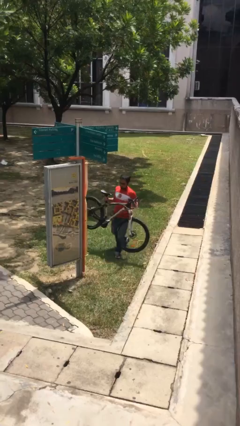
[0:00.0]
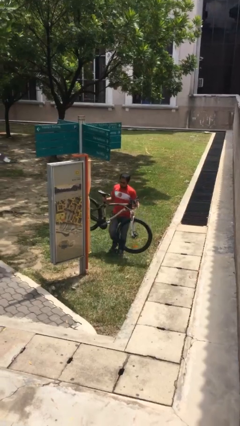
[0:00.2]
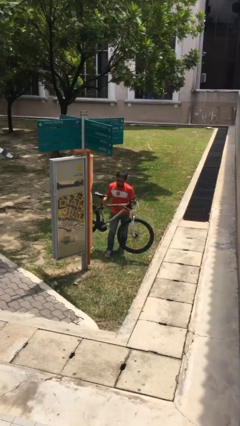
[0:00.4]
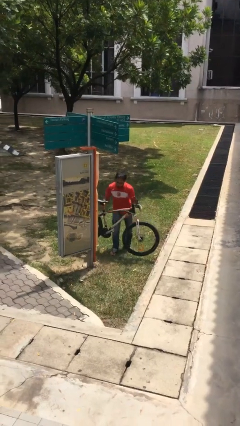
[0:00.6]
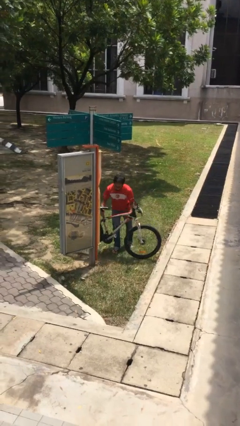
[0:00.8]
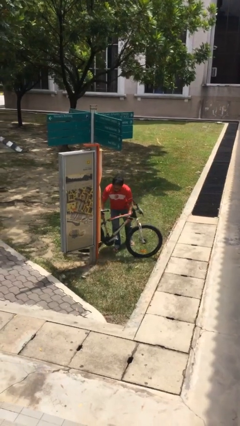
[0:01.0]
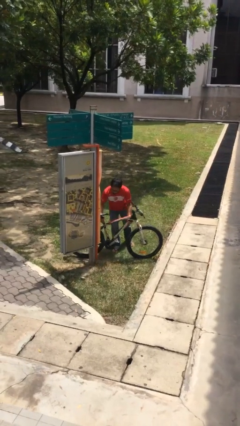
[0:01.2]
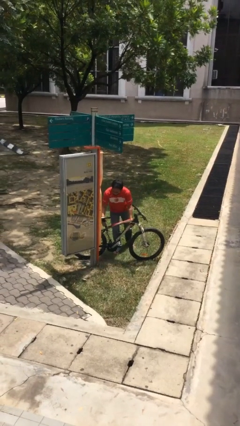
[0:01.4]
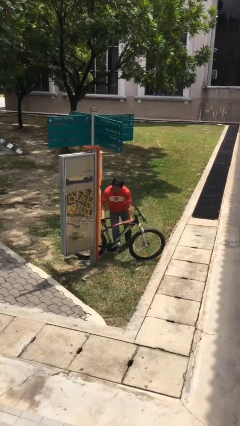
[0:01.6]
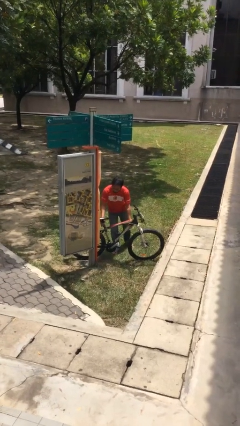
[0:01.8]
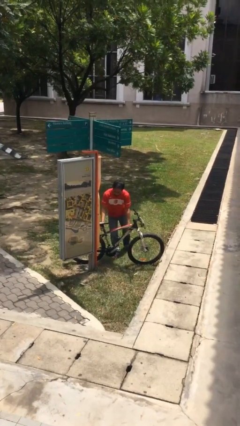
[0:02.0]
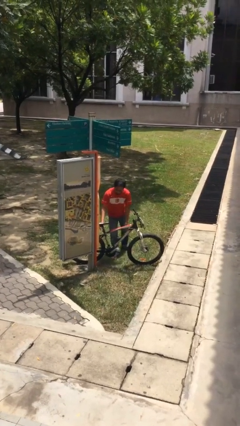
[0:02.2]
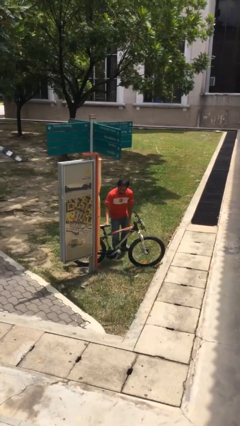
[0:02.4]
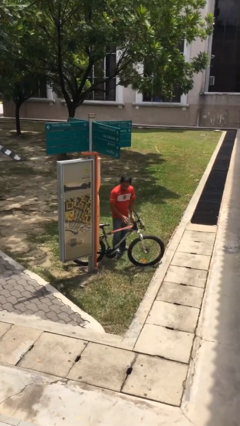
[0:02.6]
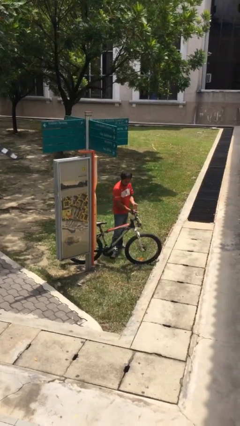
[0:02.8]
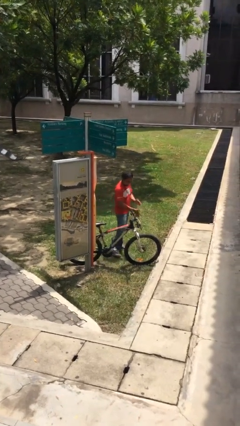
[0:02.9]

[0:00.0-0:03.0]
person puts down object on floor

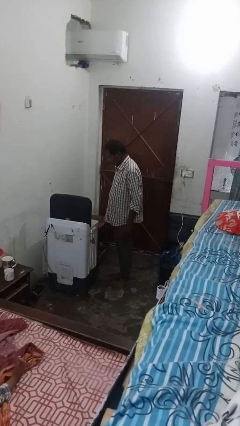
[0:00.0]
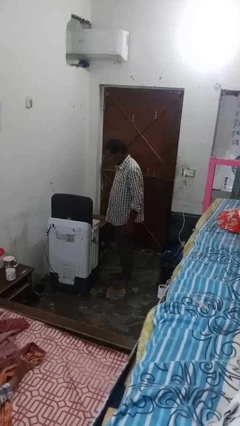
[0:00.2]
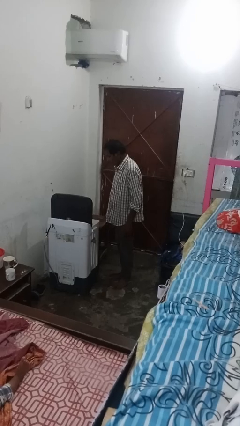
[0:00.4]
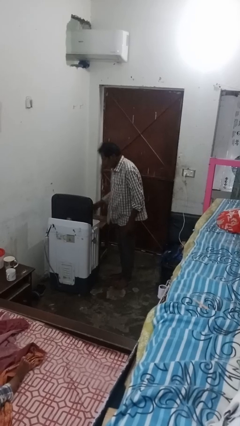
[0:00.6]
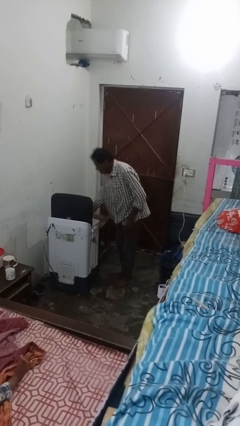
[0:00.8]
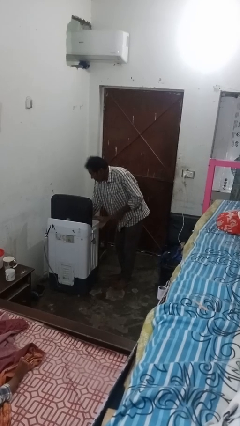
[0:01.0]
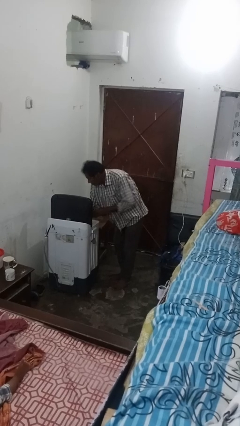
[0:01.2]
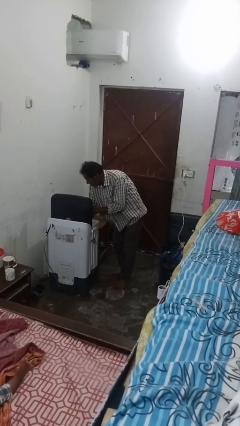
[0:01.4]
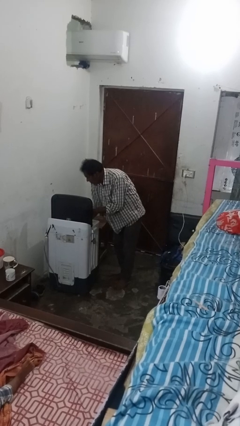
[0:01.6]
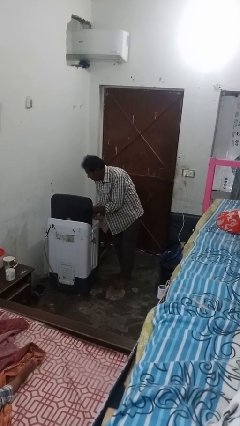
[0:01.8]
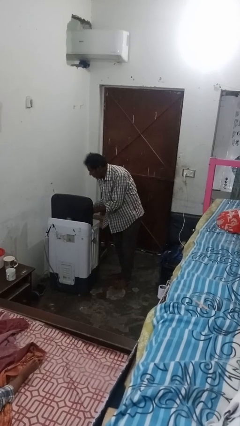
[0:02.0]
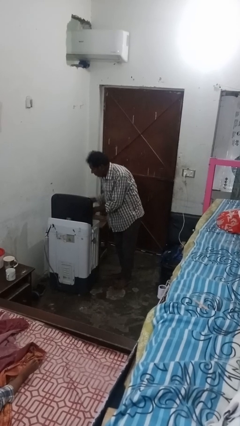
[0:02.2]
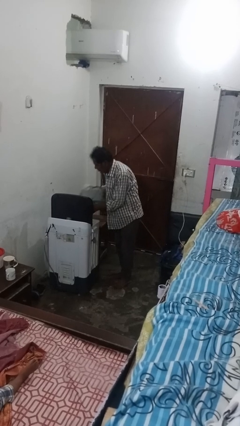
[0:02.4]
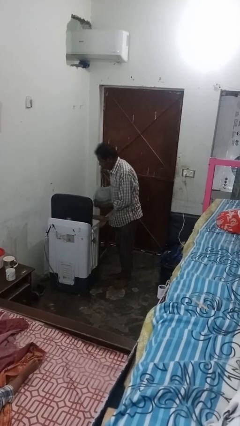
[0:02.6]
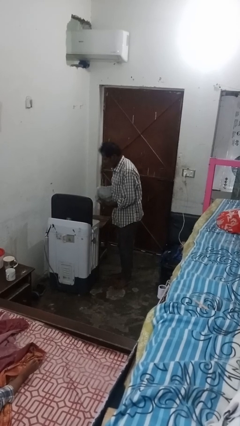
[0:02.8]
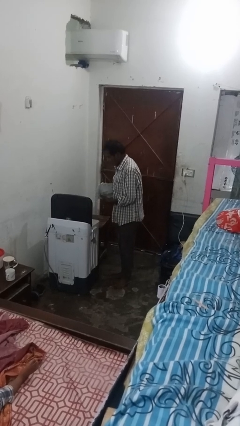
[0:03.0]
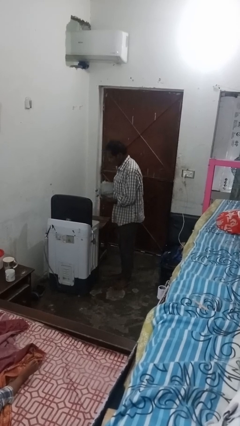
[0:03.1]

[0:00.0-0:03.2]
person unloads dryer

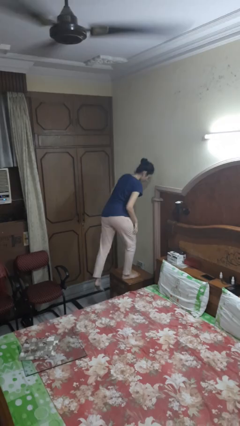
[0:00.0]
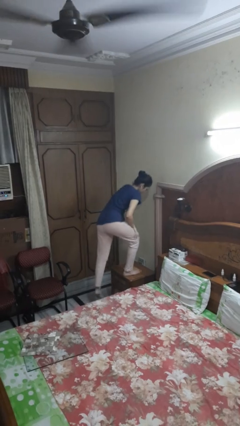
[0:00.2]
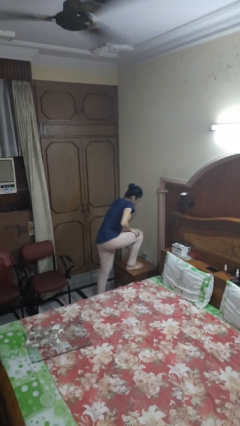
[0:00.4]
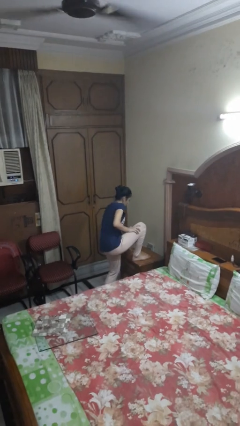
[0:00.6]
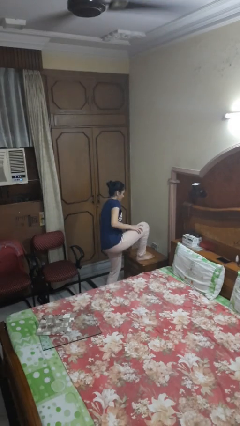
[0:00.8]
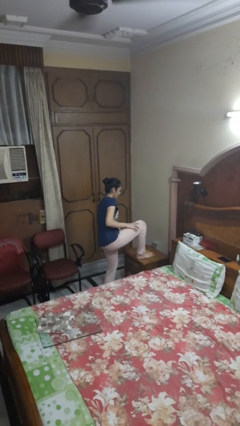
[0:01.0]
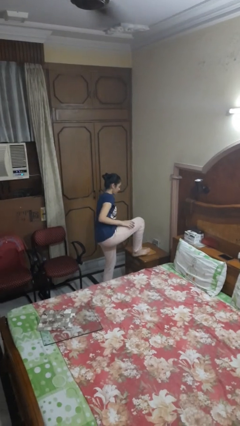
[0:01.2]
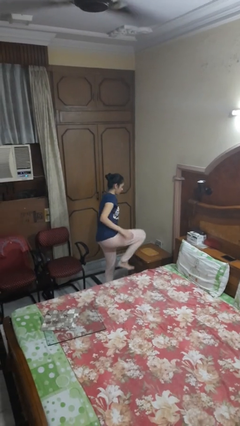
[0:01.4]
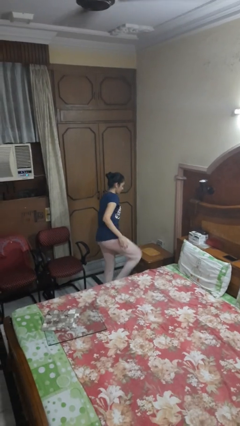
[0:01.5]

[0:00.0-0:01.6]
person climbs off table

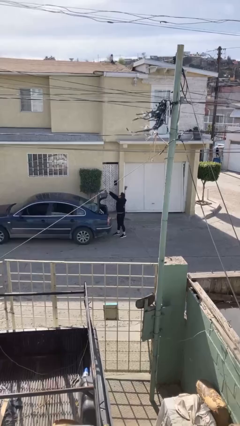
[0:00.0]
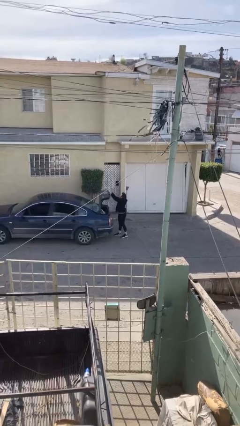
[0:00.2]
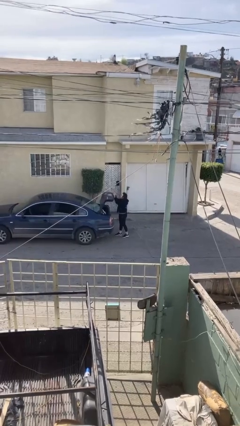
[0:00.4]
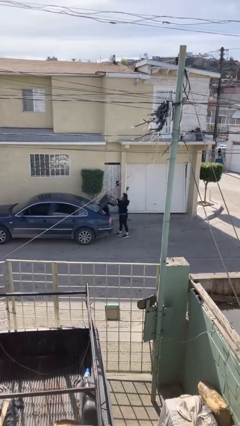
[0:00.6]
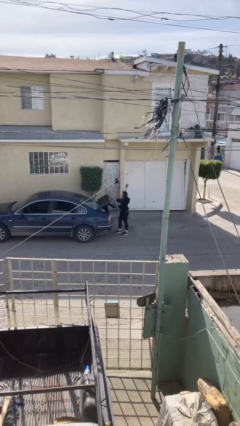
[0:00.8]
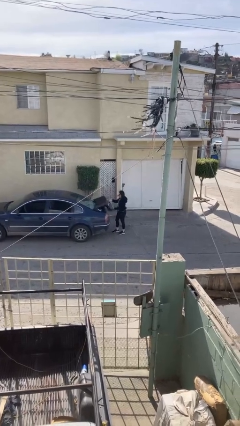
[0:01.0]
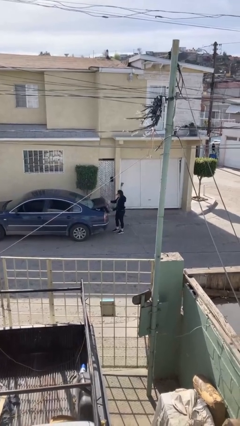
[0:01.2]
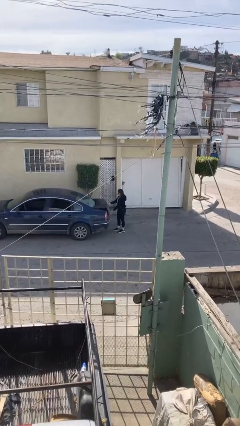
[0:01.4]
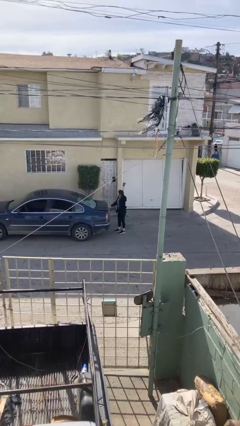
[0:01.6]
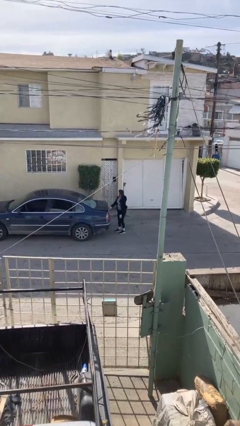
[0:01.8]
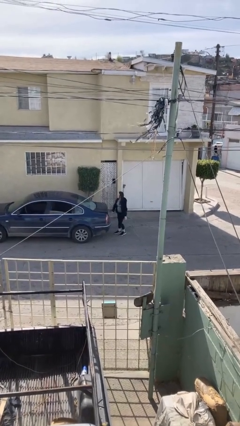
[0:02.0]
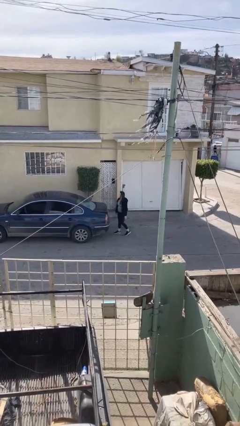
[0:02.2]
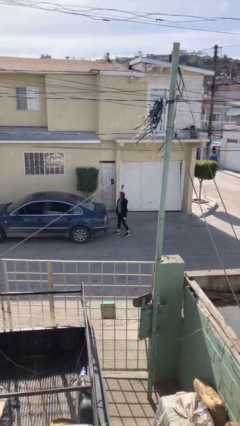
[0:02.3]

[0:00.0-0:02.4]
person closes car trunk

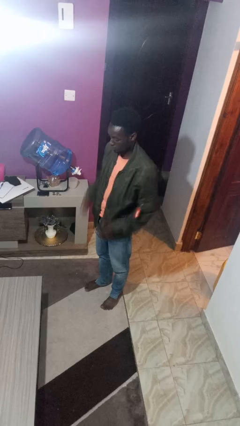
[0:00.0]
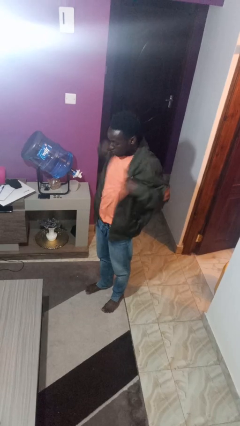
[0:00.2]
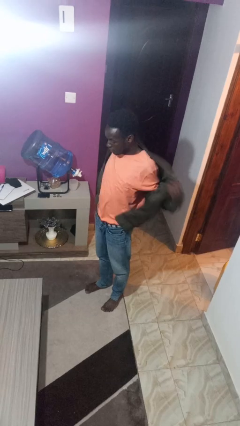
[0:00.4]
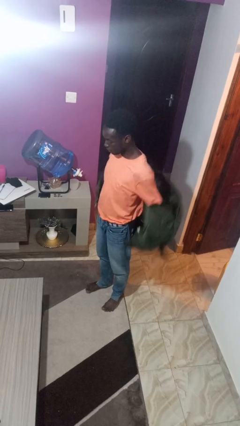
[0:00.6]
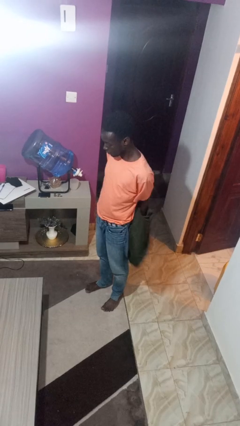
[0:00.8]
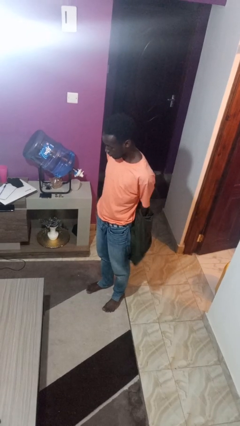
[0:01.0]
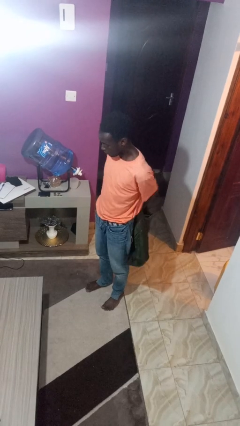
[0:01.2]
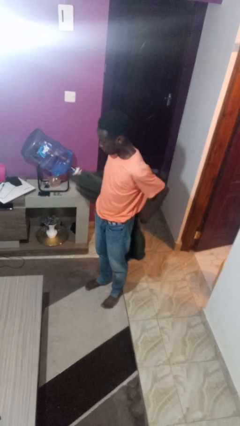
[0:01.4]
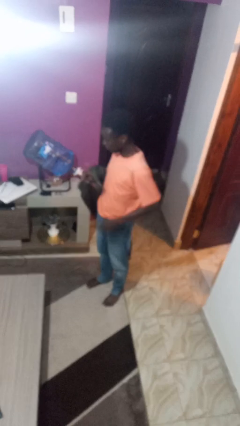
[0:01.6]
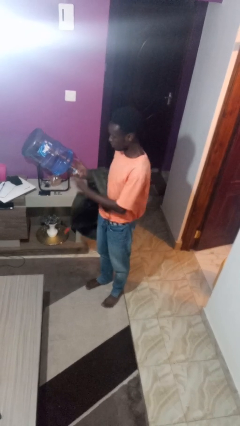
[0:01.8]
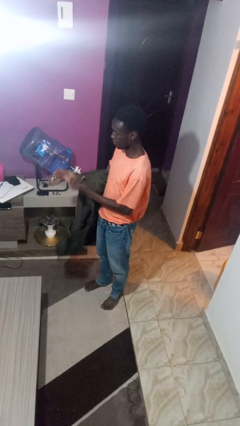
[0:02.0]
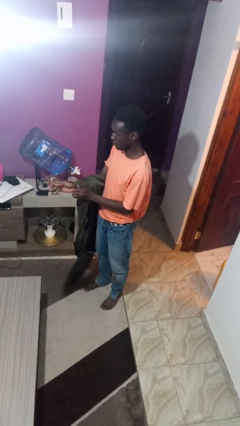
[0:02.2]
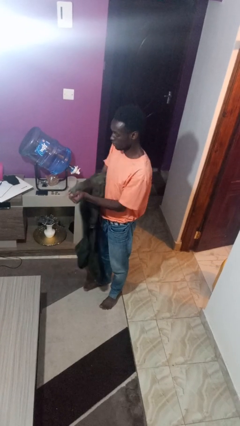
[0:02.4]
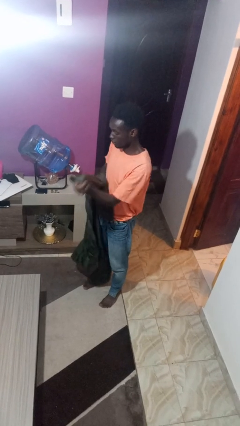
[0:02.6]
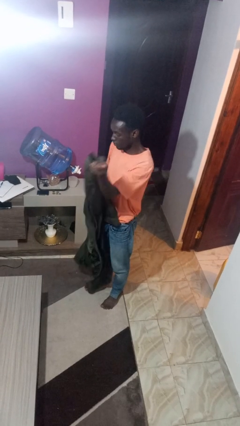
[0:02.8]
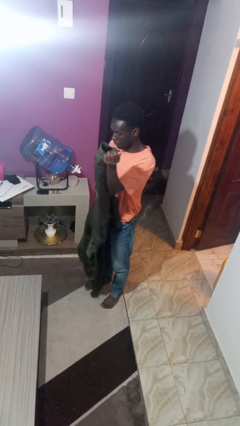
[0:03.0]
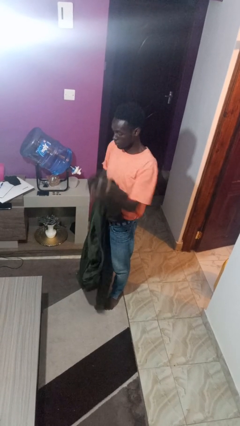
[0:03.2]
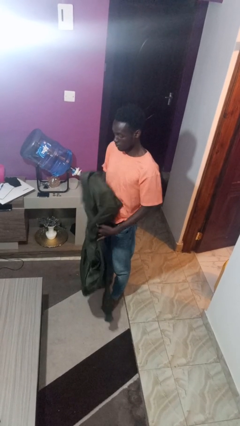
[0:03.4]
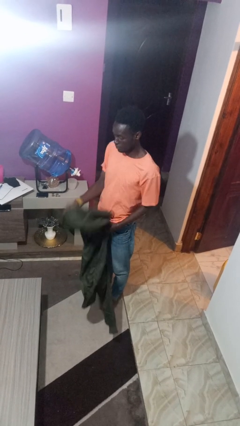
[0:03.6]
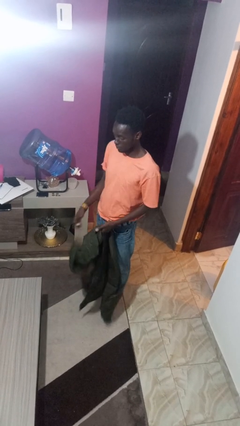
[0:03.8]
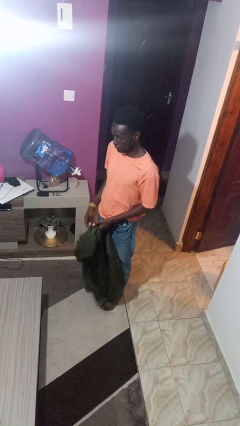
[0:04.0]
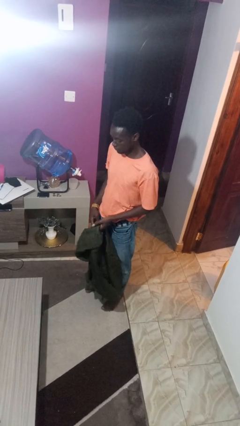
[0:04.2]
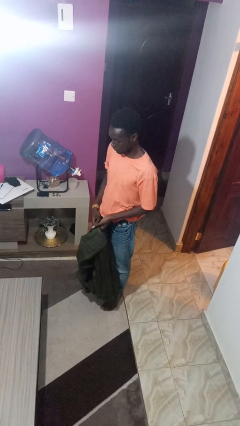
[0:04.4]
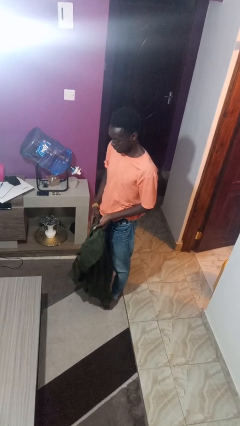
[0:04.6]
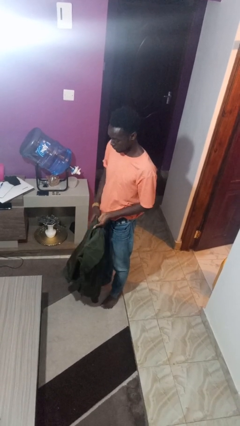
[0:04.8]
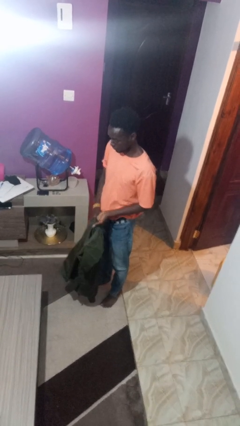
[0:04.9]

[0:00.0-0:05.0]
person takes off jacket

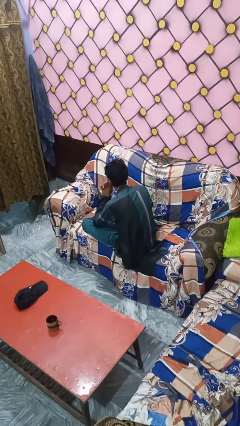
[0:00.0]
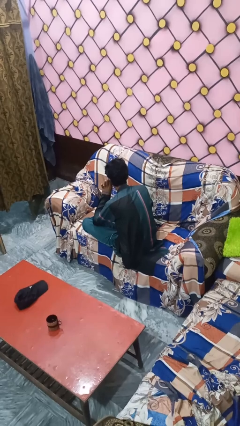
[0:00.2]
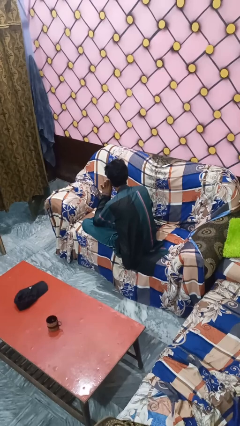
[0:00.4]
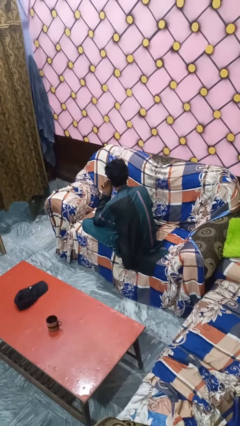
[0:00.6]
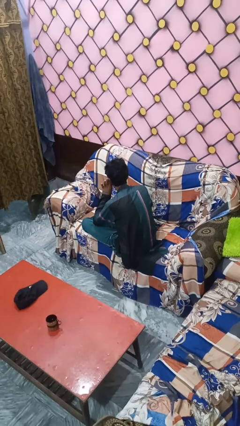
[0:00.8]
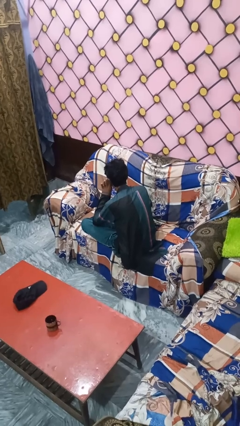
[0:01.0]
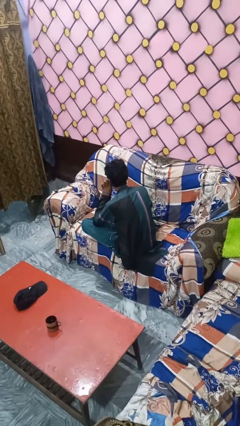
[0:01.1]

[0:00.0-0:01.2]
person gestures listen closely

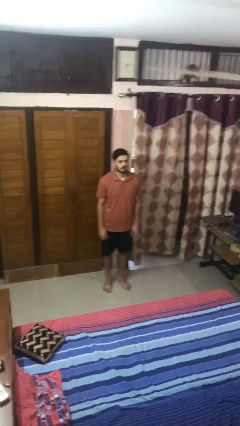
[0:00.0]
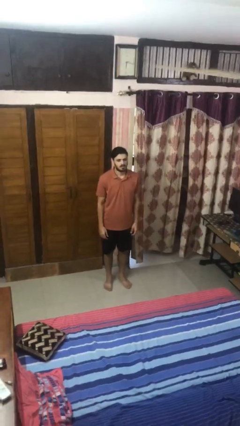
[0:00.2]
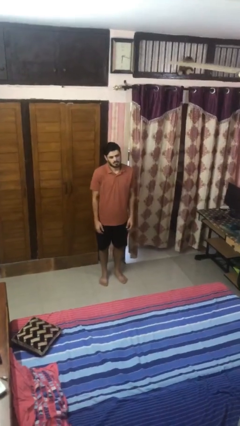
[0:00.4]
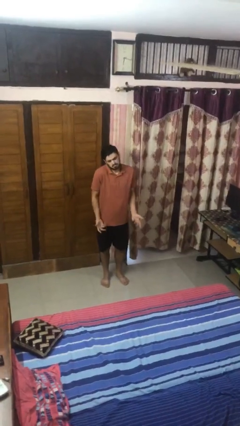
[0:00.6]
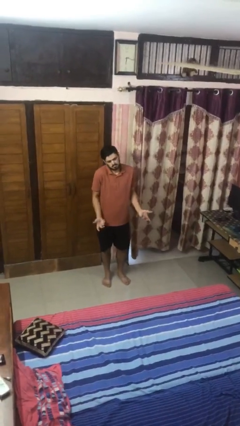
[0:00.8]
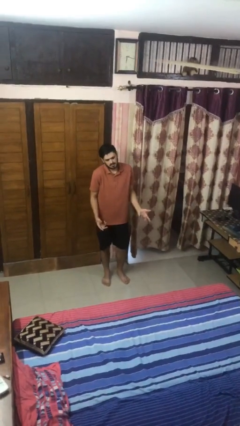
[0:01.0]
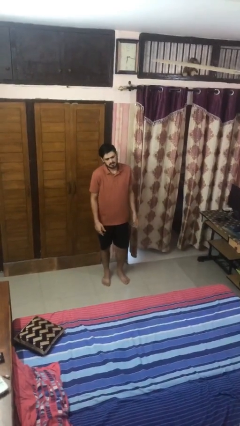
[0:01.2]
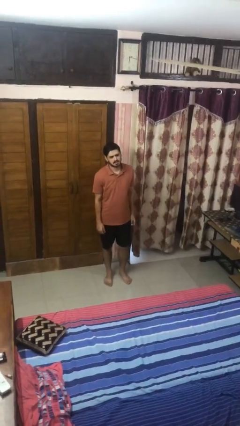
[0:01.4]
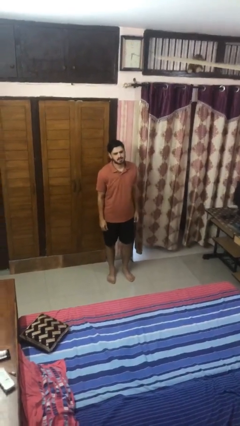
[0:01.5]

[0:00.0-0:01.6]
person shrugs
